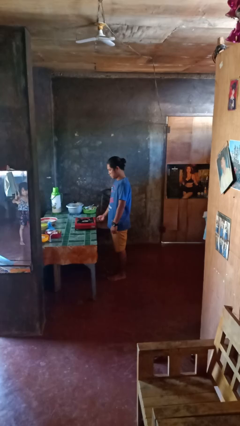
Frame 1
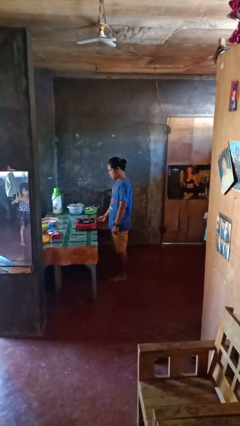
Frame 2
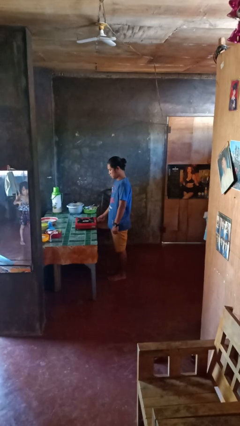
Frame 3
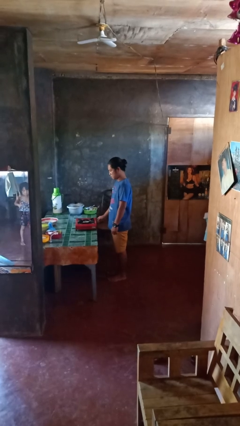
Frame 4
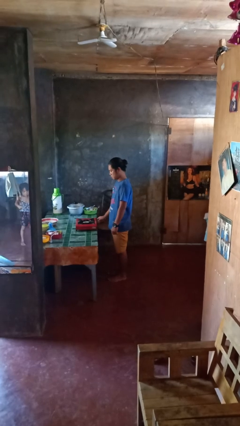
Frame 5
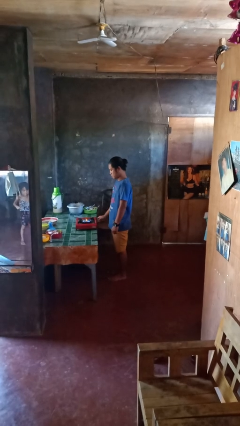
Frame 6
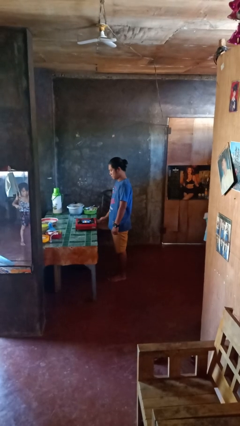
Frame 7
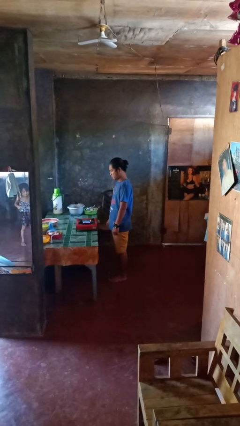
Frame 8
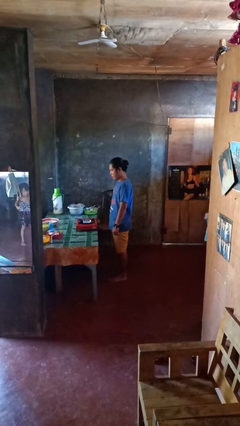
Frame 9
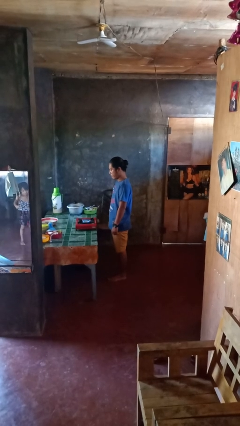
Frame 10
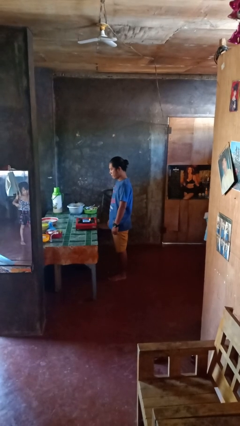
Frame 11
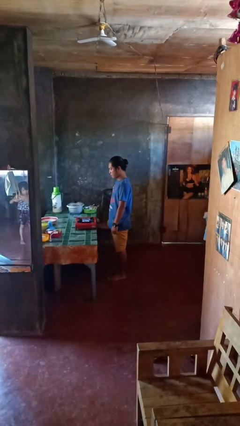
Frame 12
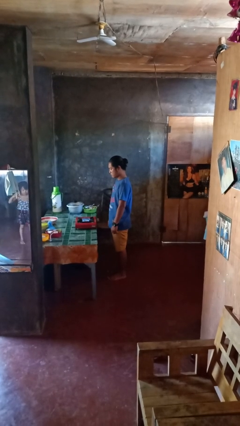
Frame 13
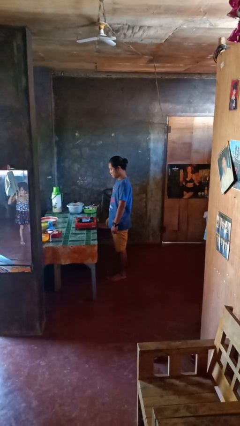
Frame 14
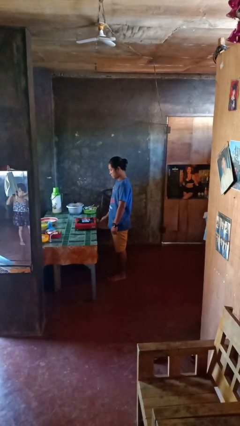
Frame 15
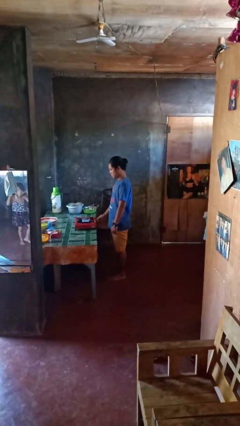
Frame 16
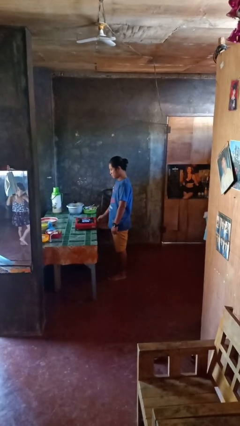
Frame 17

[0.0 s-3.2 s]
person turns on stovetop

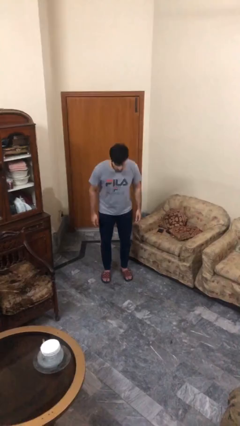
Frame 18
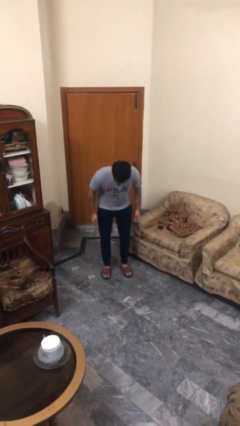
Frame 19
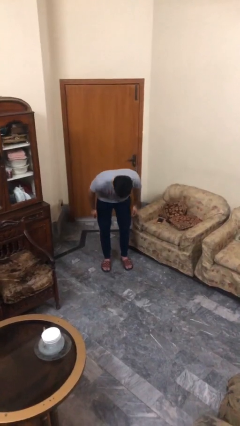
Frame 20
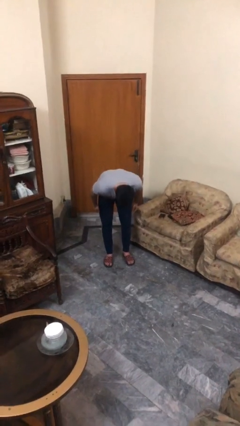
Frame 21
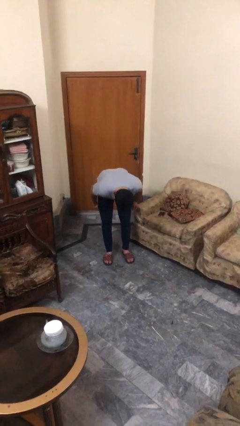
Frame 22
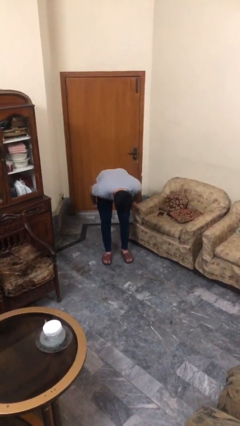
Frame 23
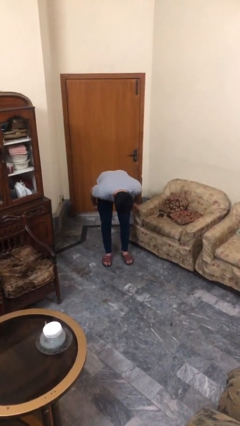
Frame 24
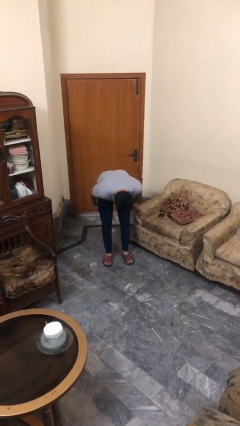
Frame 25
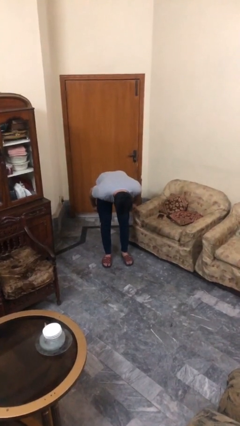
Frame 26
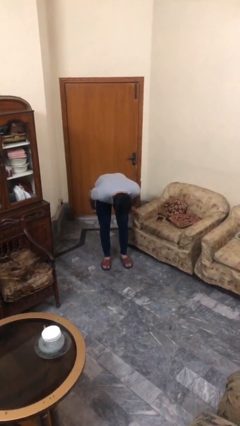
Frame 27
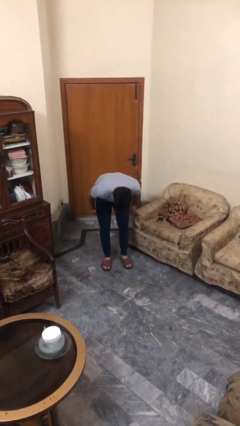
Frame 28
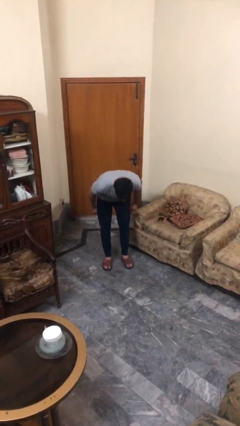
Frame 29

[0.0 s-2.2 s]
person bows

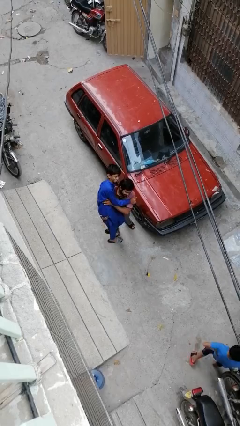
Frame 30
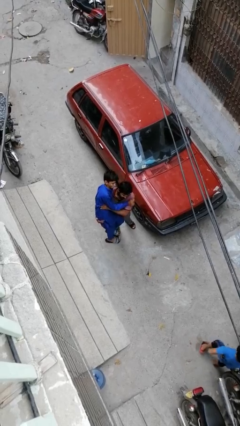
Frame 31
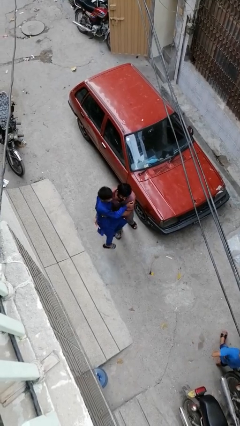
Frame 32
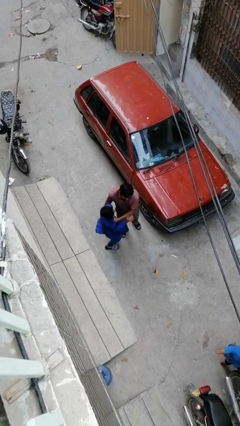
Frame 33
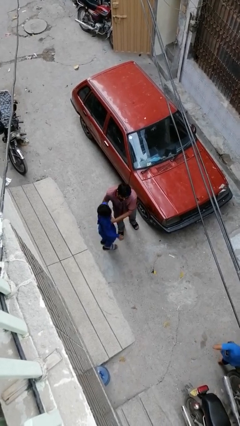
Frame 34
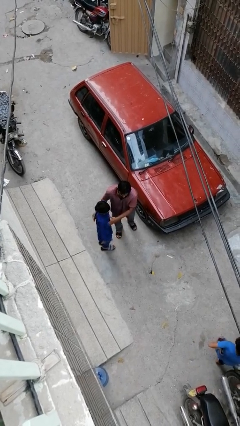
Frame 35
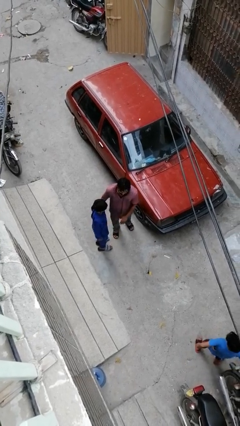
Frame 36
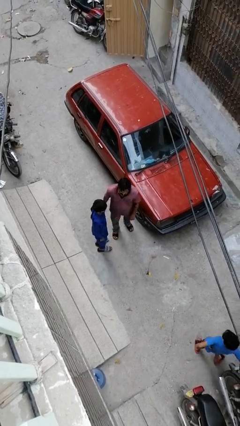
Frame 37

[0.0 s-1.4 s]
person puts down person

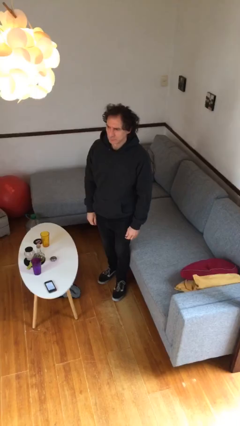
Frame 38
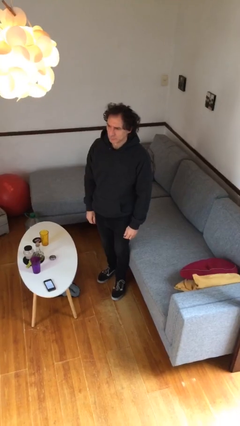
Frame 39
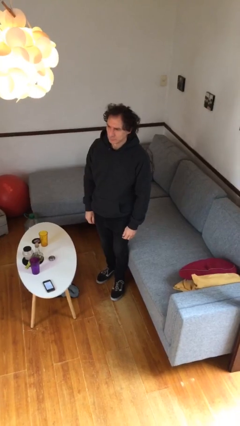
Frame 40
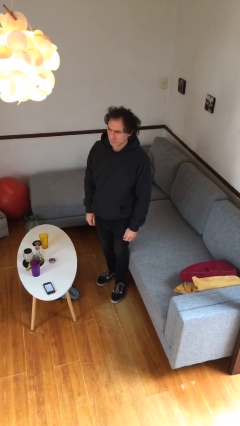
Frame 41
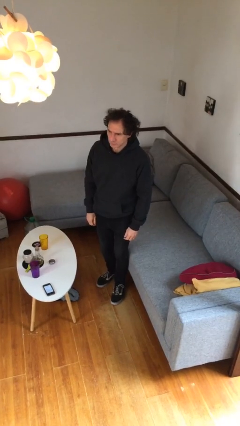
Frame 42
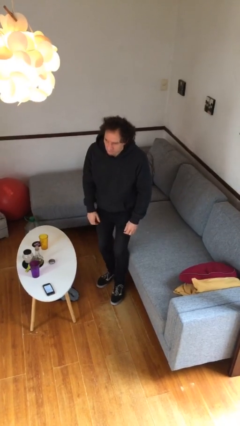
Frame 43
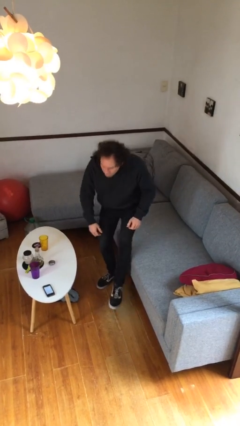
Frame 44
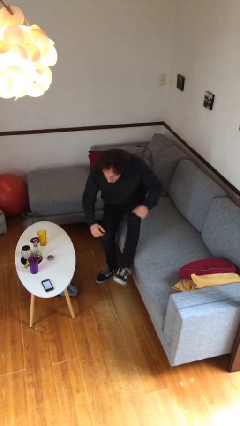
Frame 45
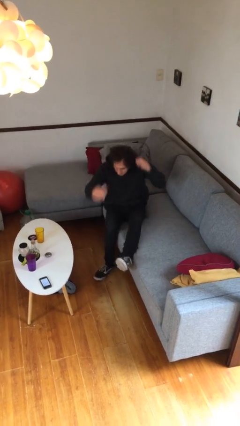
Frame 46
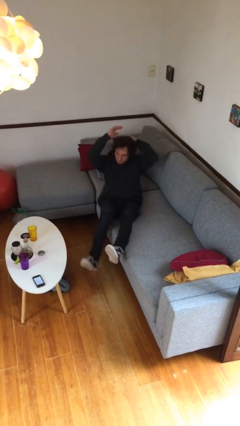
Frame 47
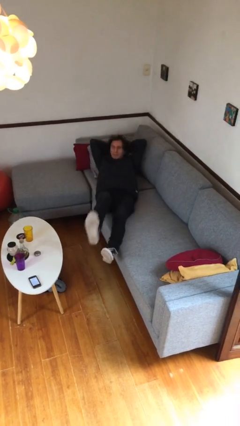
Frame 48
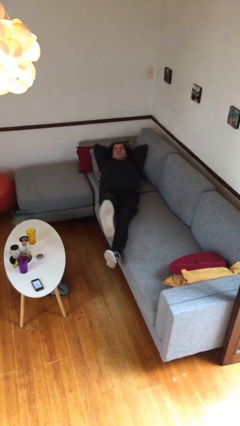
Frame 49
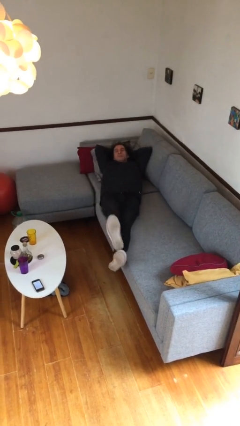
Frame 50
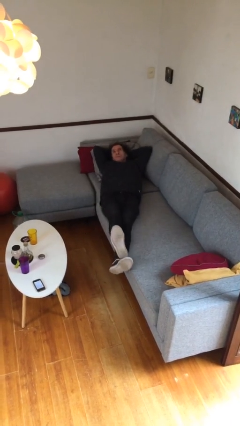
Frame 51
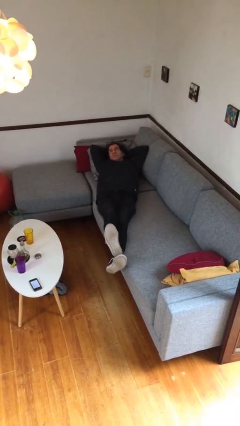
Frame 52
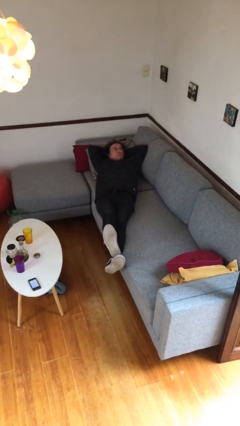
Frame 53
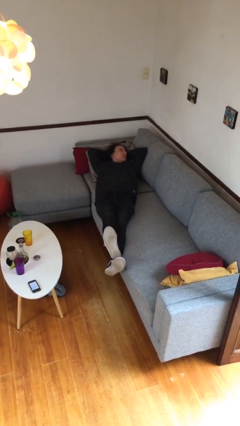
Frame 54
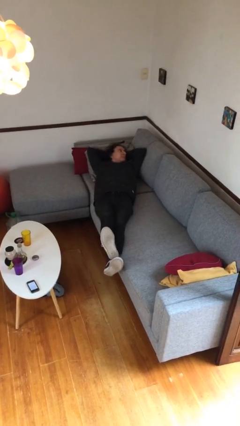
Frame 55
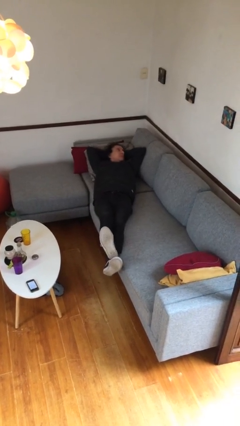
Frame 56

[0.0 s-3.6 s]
person lies down on couch

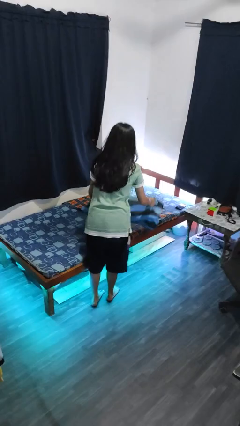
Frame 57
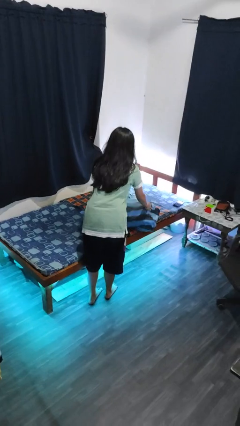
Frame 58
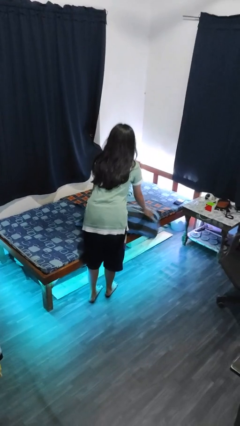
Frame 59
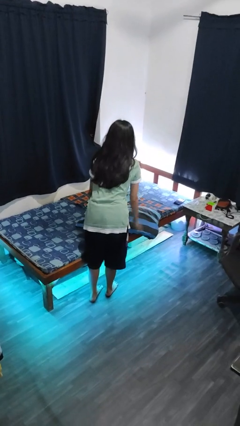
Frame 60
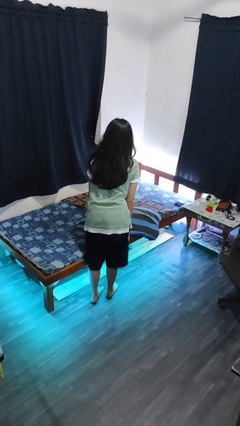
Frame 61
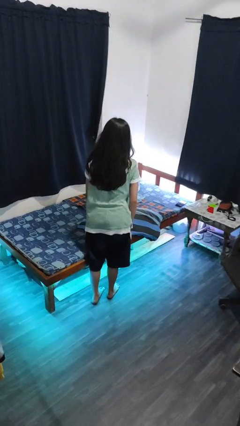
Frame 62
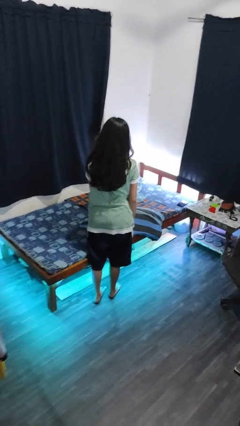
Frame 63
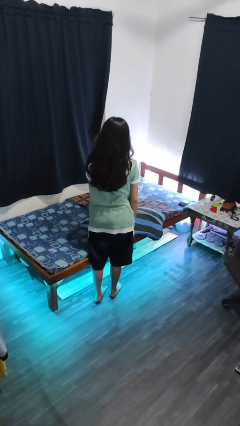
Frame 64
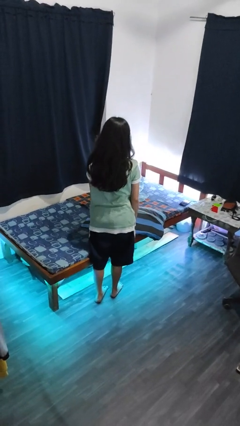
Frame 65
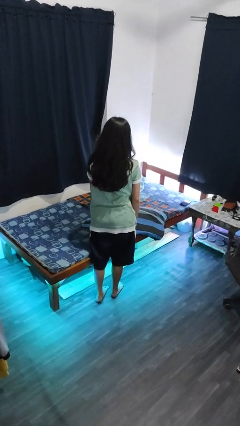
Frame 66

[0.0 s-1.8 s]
person puts down object on bed

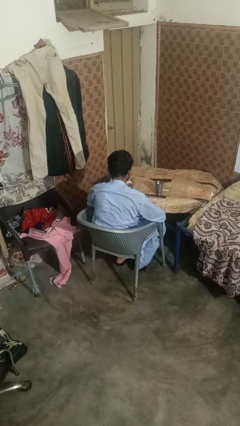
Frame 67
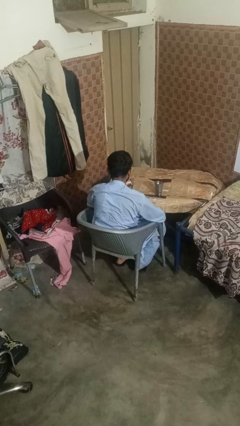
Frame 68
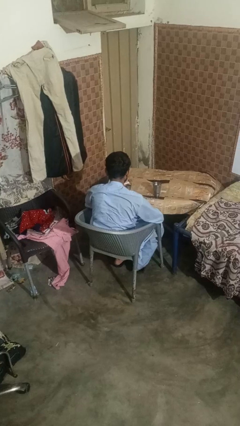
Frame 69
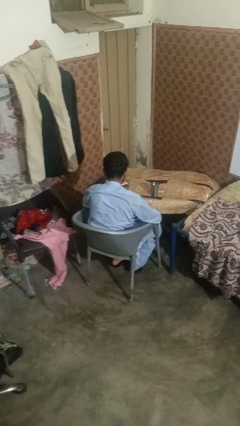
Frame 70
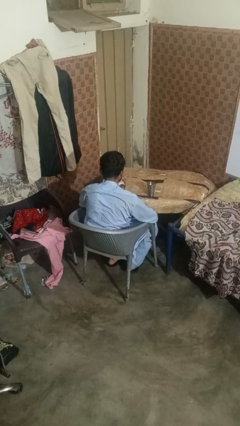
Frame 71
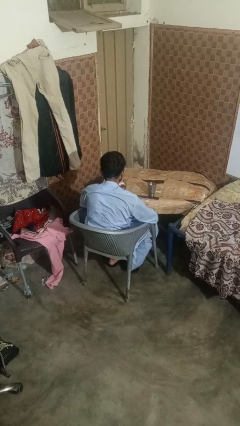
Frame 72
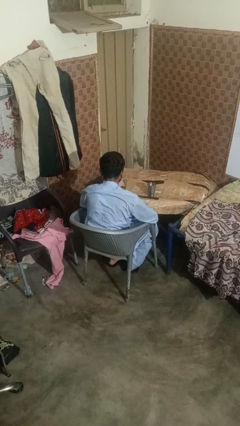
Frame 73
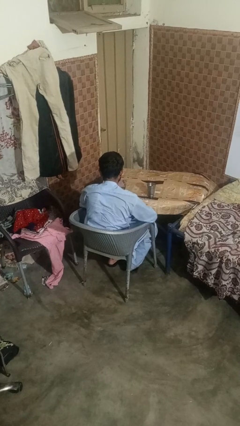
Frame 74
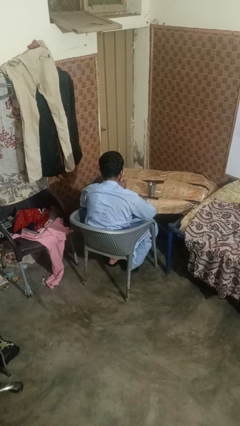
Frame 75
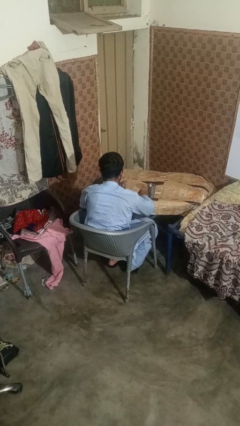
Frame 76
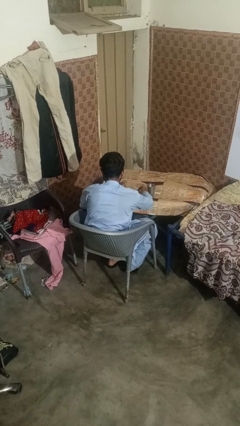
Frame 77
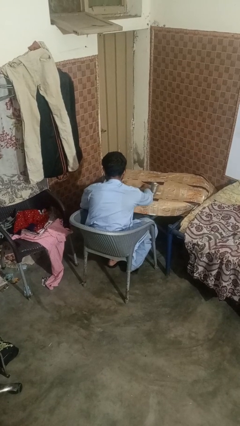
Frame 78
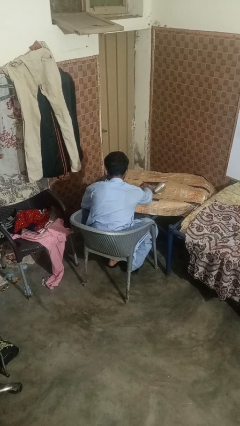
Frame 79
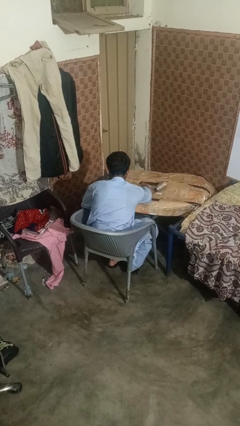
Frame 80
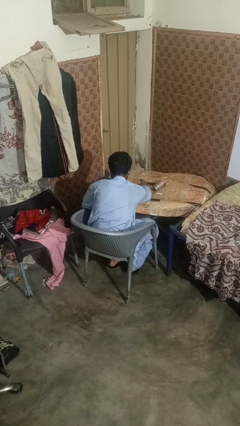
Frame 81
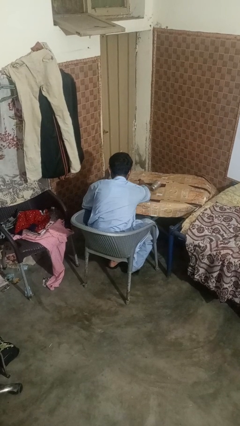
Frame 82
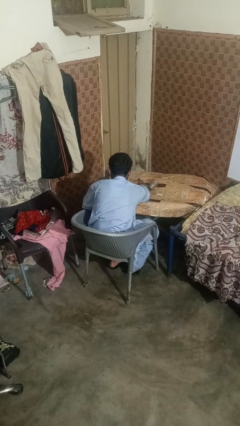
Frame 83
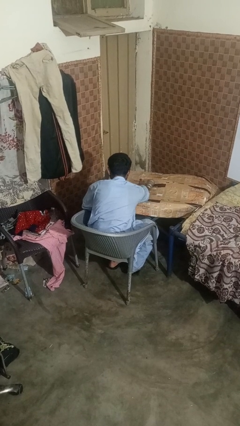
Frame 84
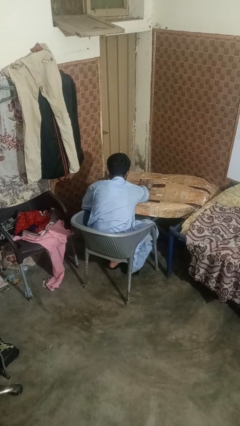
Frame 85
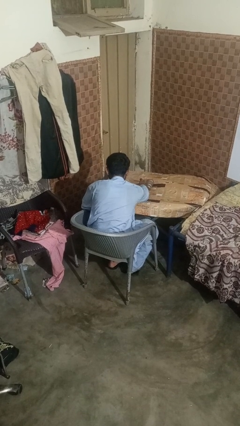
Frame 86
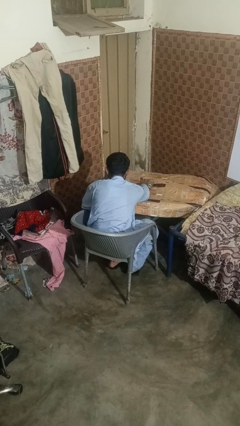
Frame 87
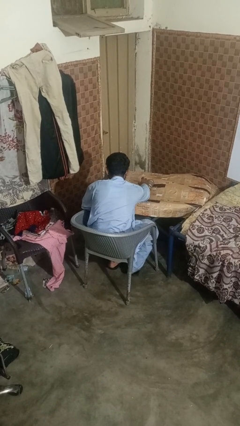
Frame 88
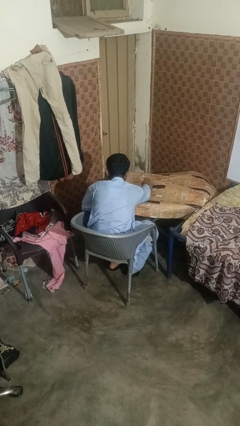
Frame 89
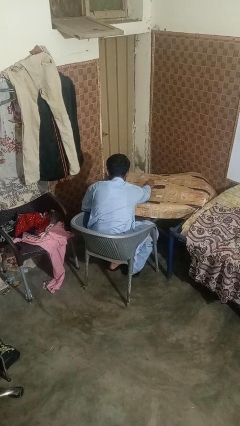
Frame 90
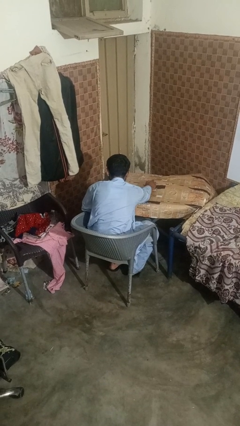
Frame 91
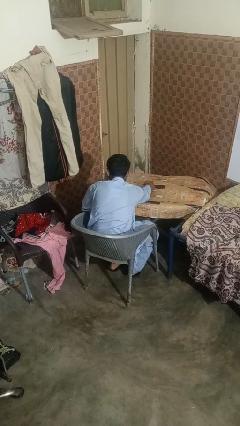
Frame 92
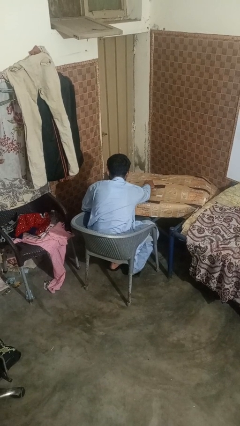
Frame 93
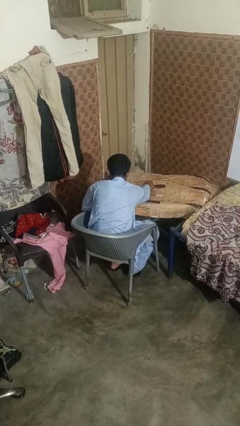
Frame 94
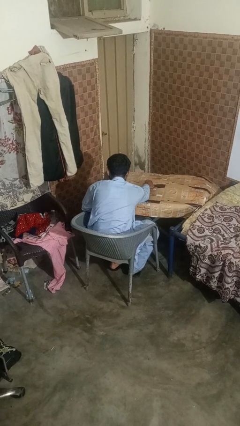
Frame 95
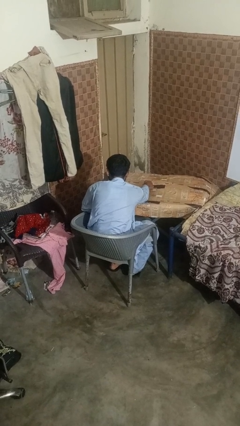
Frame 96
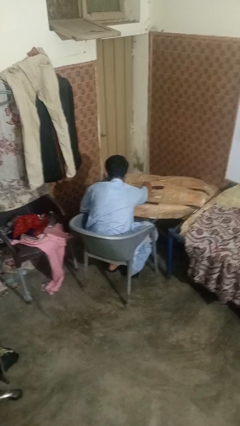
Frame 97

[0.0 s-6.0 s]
person knocks over glass
